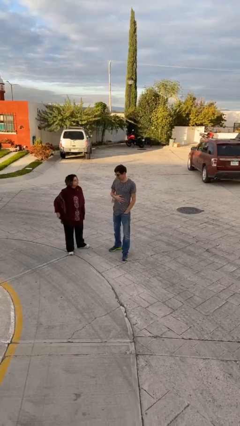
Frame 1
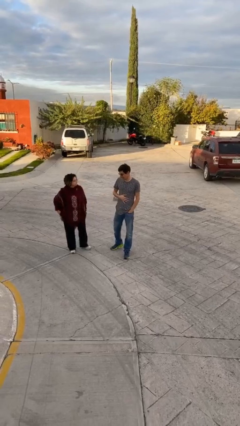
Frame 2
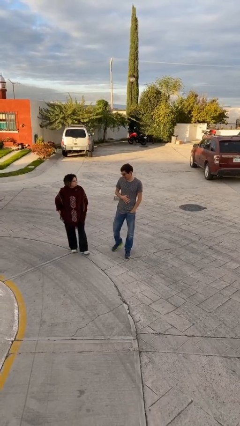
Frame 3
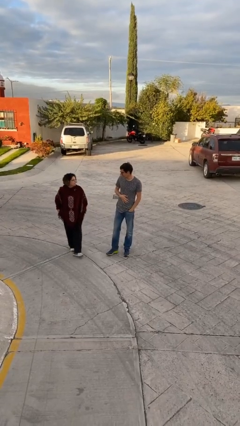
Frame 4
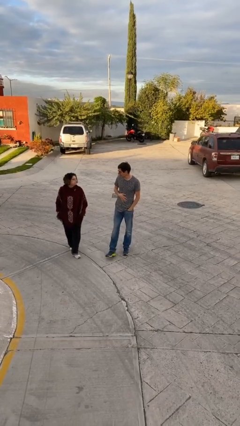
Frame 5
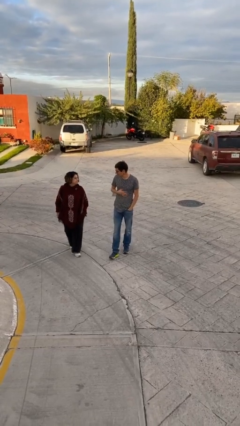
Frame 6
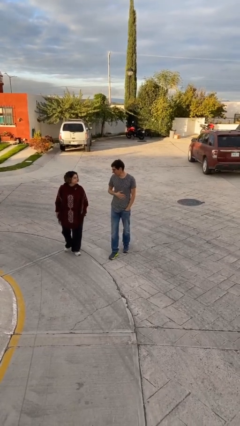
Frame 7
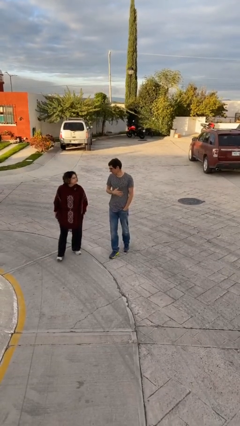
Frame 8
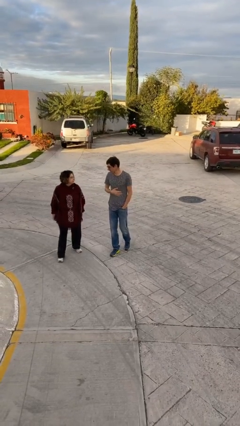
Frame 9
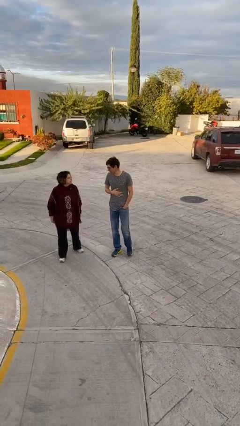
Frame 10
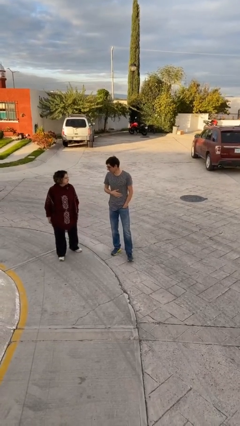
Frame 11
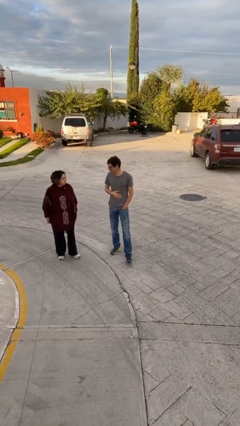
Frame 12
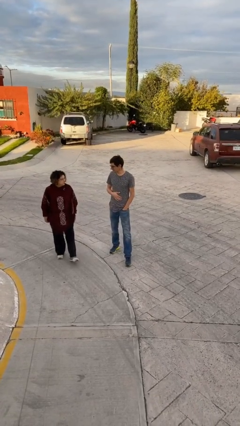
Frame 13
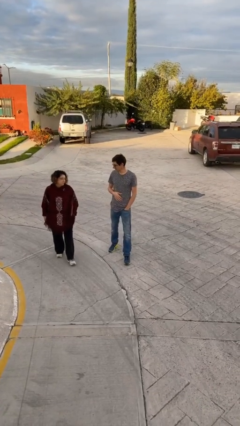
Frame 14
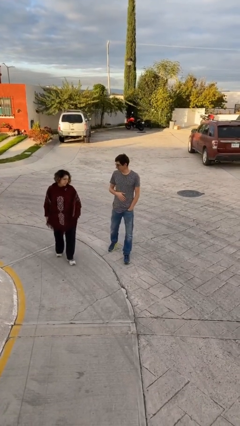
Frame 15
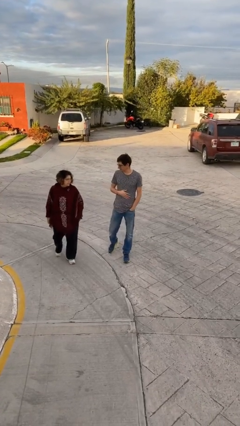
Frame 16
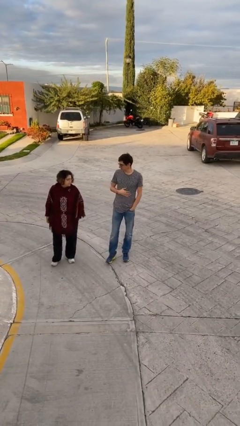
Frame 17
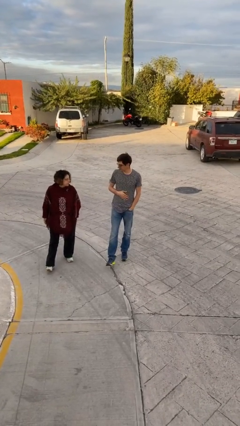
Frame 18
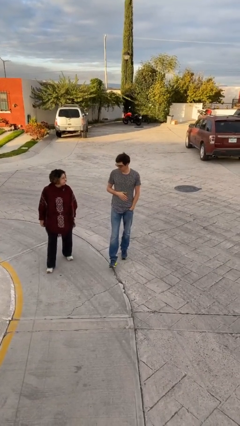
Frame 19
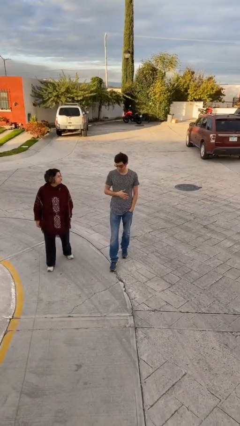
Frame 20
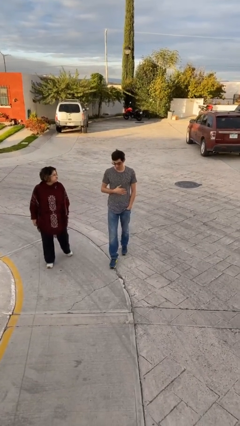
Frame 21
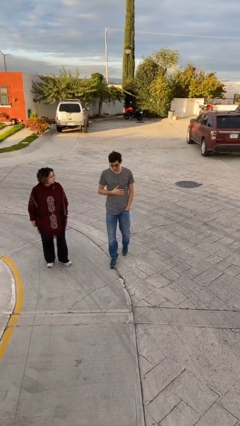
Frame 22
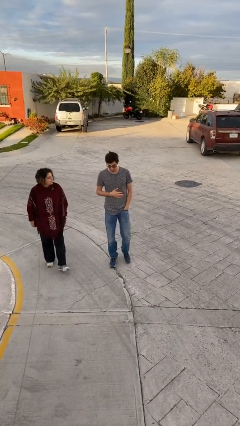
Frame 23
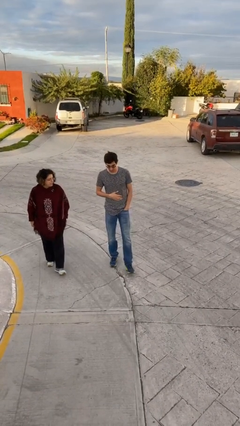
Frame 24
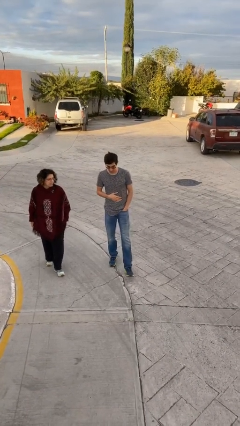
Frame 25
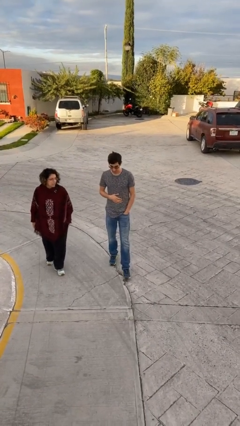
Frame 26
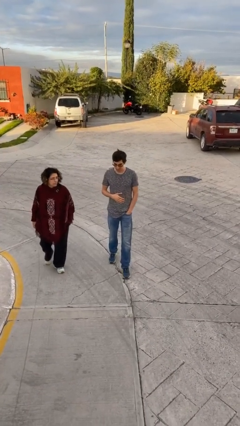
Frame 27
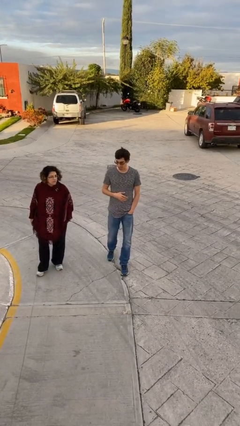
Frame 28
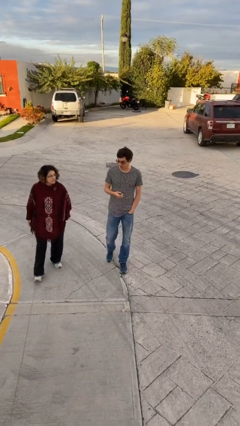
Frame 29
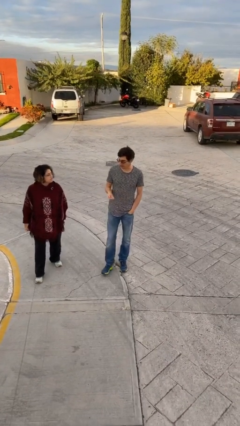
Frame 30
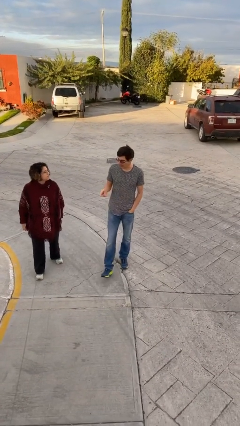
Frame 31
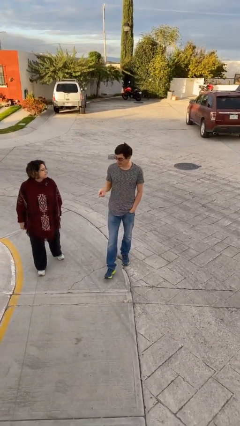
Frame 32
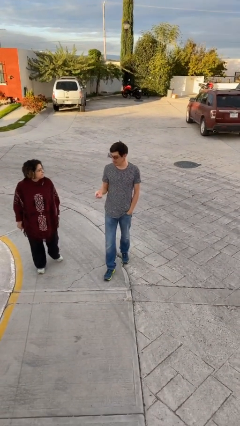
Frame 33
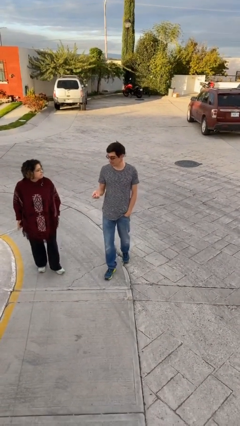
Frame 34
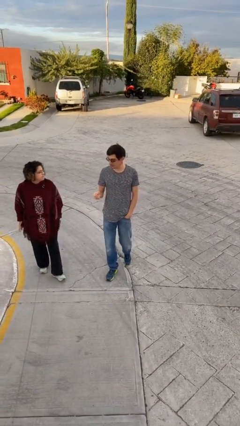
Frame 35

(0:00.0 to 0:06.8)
person talks to person

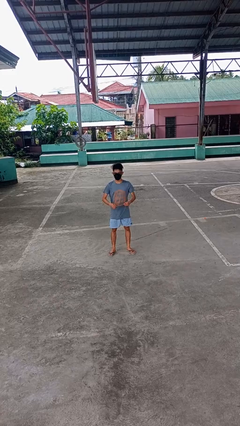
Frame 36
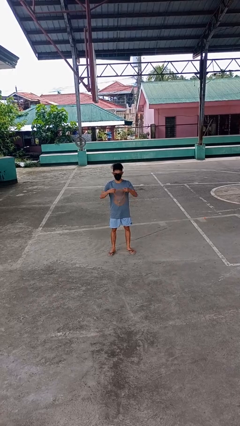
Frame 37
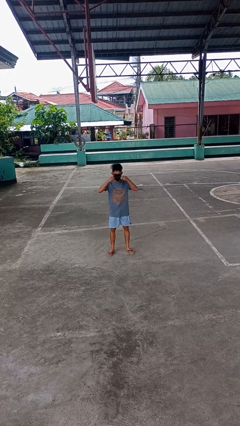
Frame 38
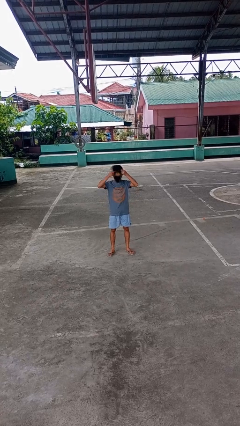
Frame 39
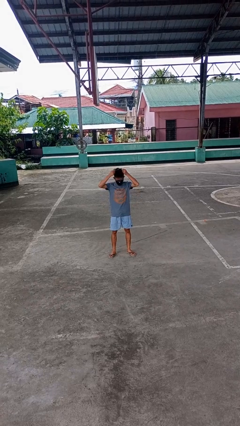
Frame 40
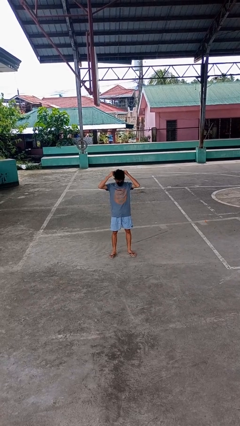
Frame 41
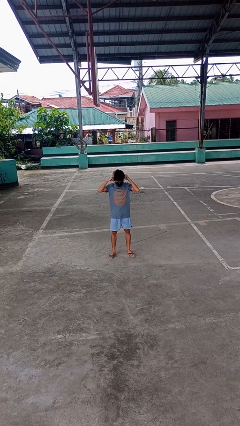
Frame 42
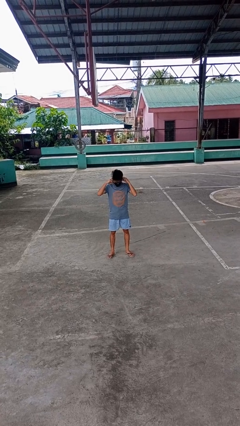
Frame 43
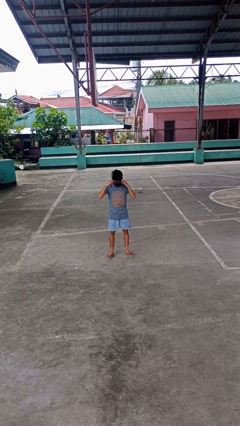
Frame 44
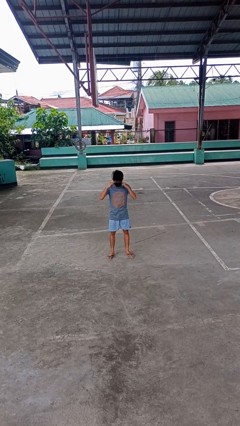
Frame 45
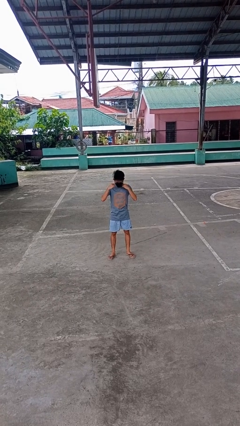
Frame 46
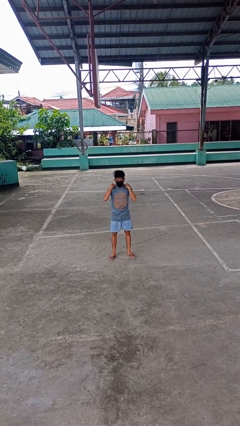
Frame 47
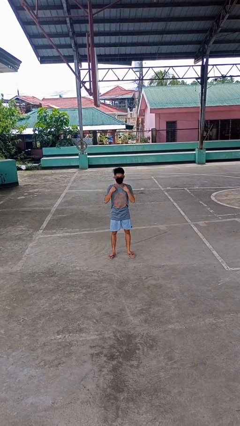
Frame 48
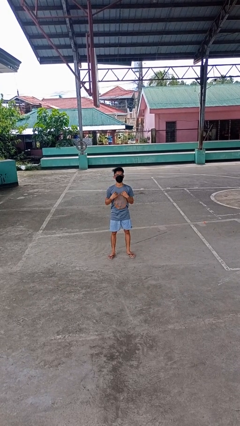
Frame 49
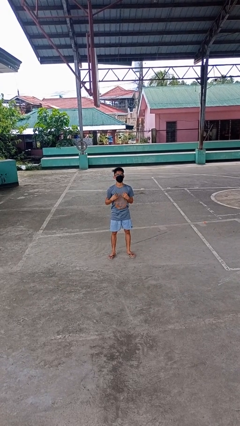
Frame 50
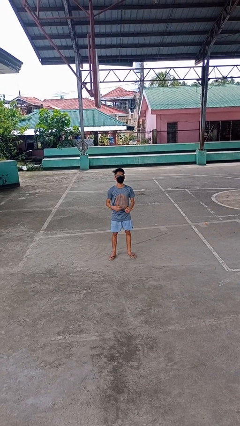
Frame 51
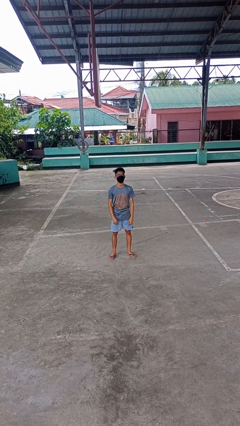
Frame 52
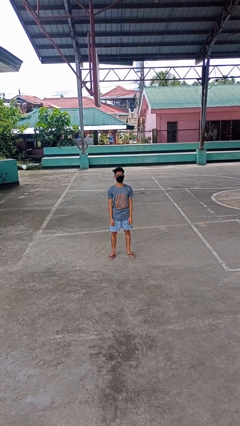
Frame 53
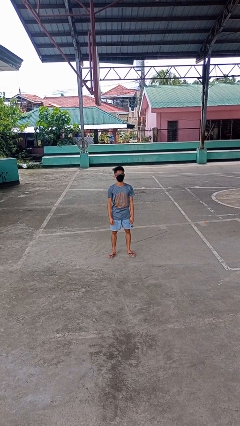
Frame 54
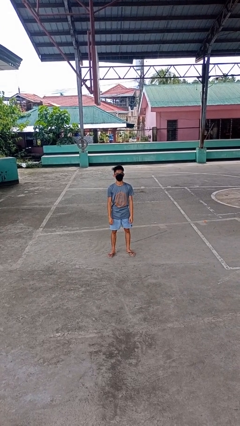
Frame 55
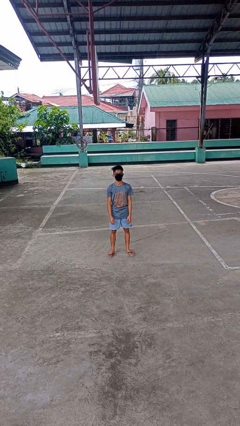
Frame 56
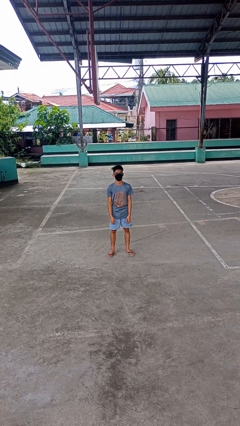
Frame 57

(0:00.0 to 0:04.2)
person puts on necklace

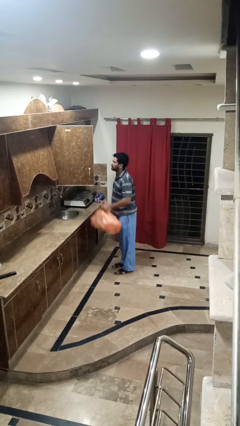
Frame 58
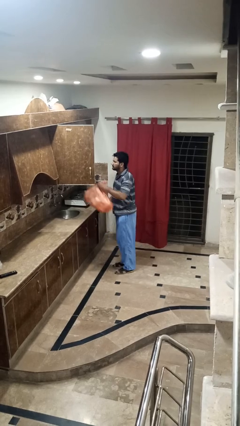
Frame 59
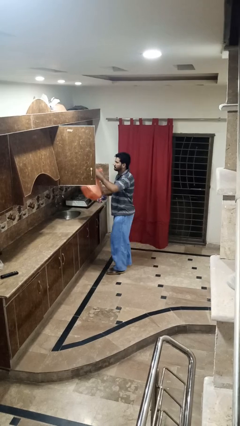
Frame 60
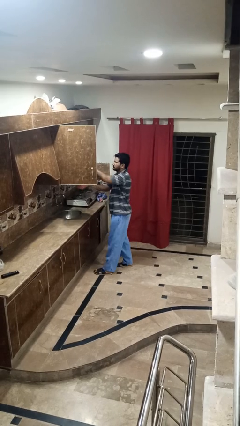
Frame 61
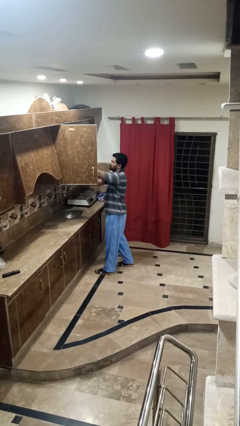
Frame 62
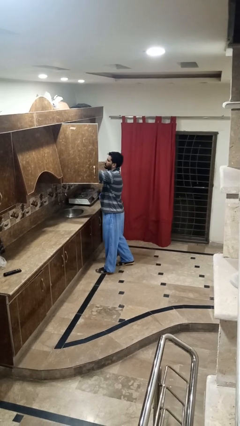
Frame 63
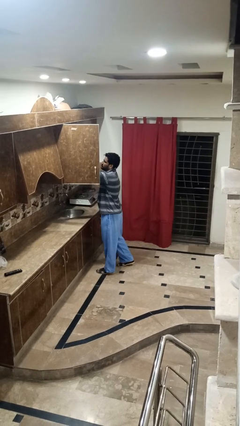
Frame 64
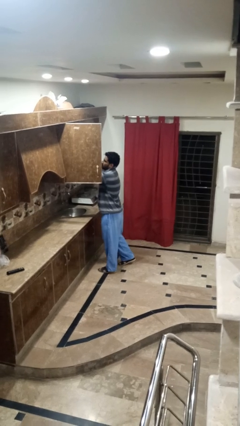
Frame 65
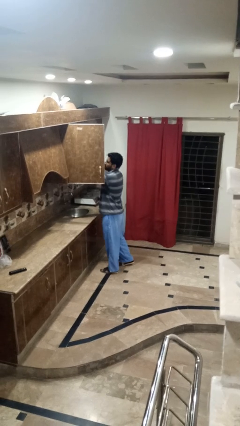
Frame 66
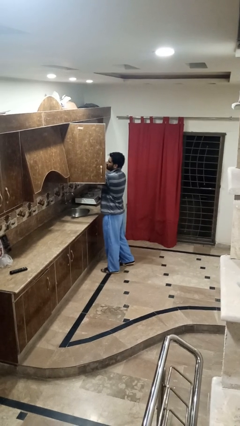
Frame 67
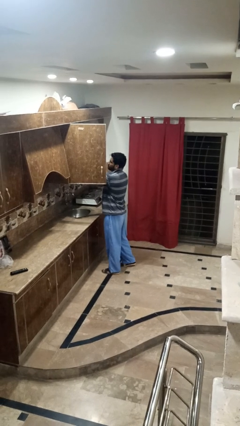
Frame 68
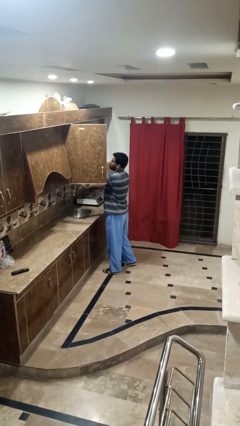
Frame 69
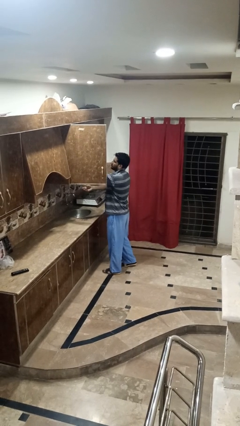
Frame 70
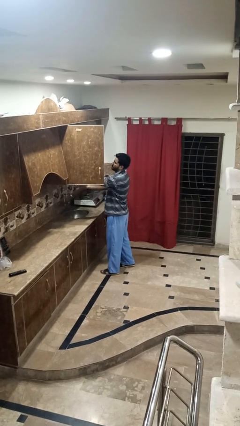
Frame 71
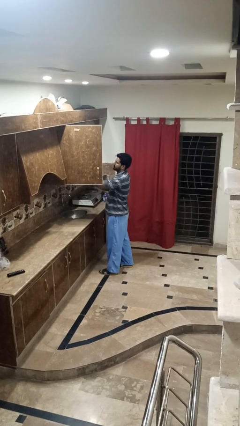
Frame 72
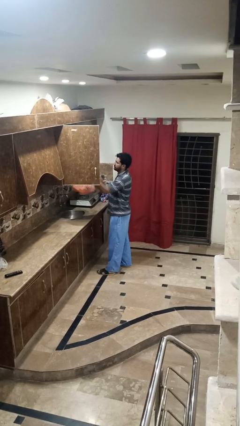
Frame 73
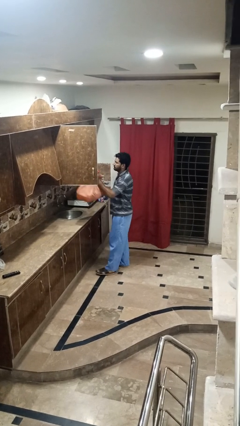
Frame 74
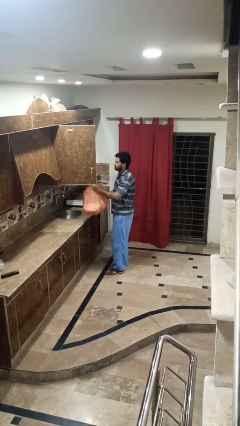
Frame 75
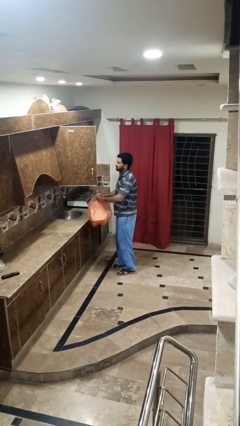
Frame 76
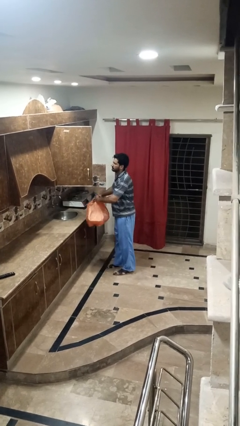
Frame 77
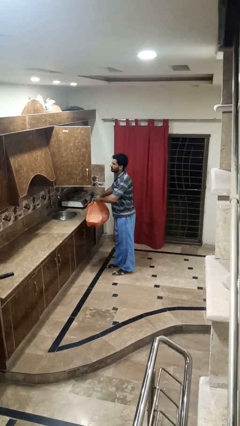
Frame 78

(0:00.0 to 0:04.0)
person loads groceries into cabinet

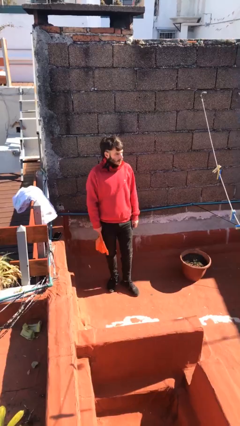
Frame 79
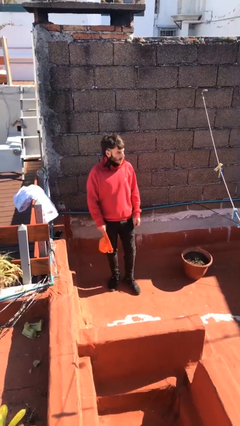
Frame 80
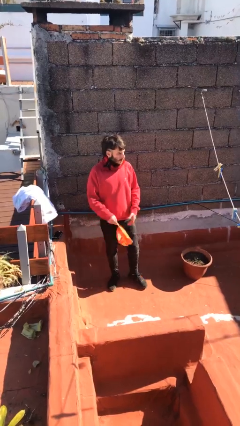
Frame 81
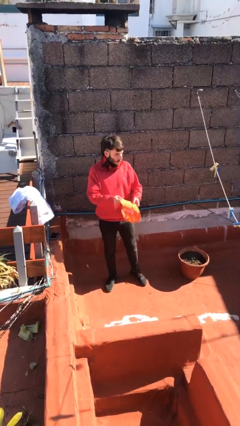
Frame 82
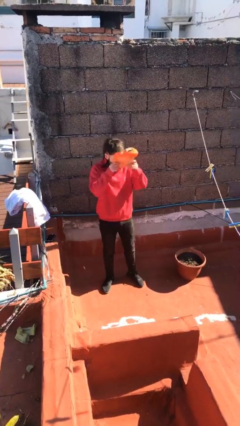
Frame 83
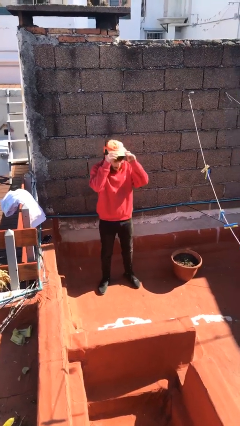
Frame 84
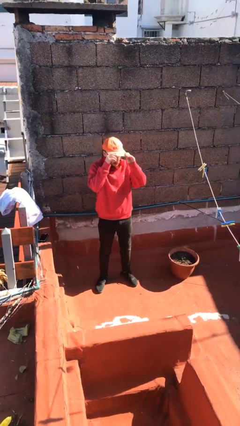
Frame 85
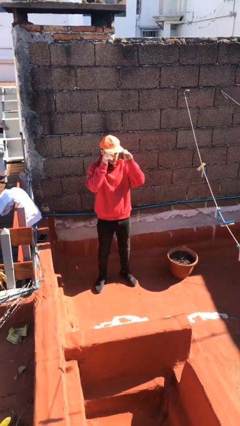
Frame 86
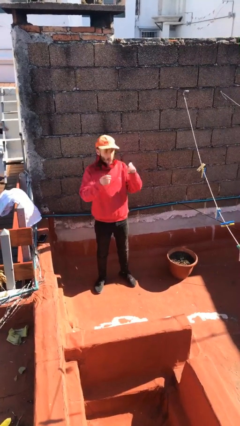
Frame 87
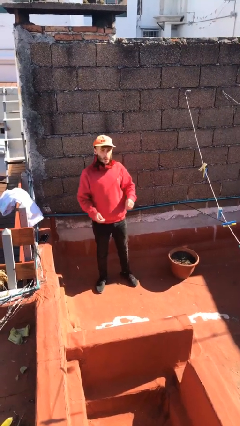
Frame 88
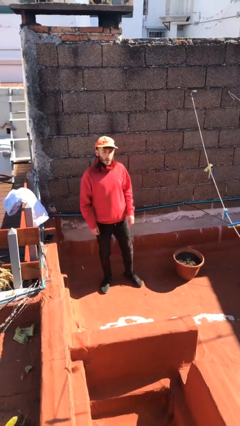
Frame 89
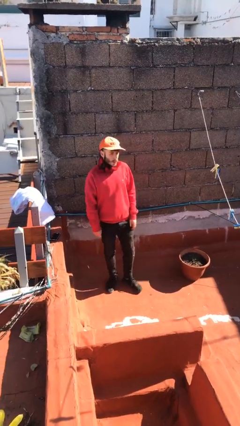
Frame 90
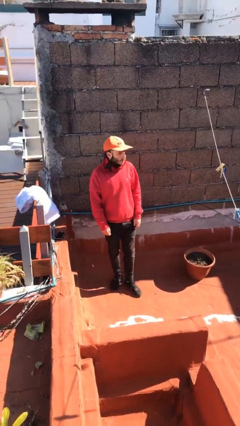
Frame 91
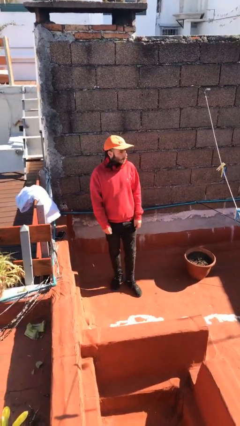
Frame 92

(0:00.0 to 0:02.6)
person puts on hat
